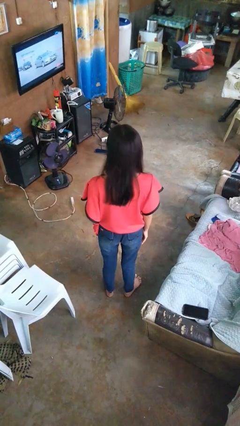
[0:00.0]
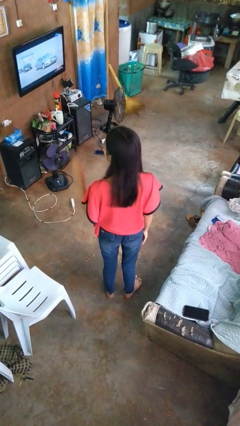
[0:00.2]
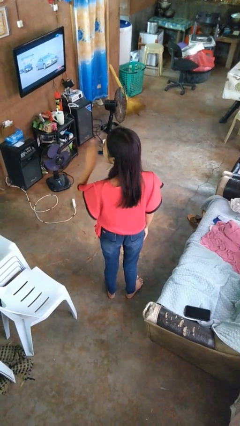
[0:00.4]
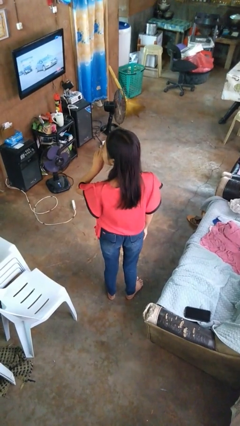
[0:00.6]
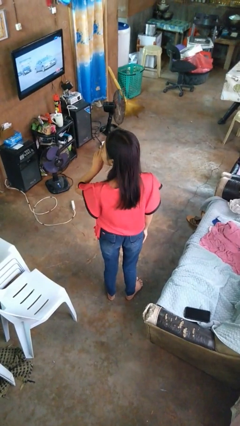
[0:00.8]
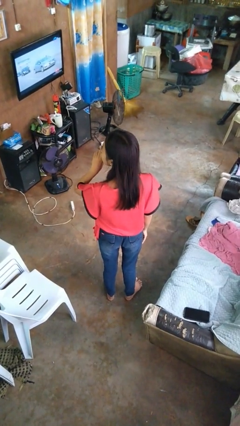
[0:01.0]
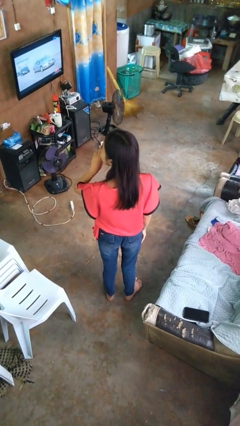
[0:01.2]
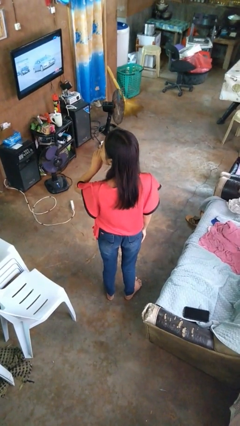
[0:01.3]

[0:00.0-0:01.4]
person gestures be quiet

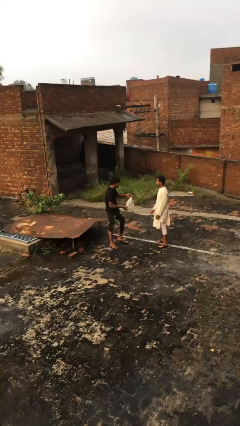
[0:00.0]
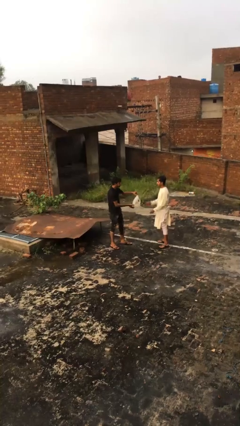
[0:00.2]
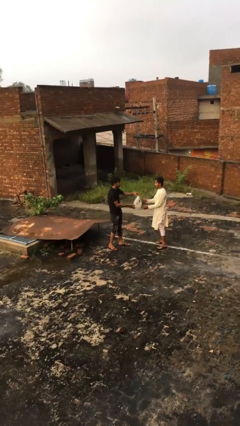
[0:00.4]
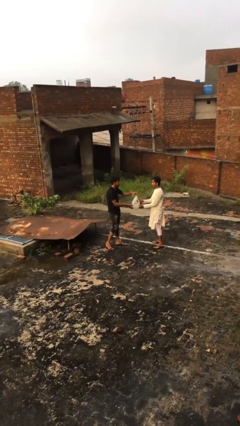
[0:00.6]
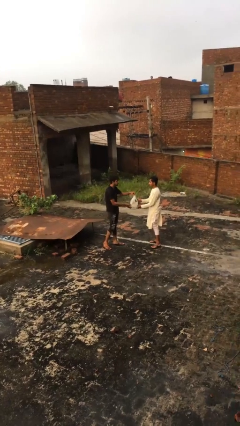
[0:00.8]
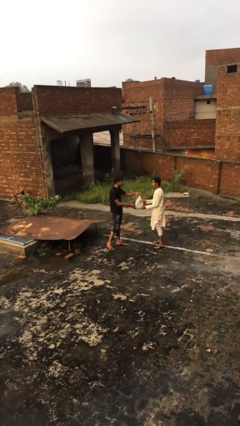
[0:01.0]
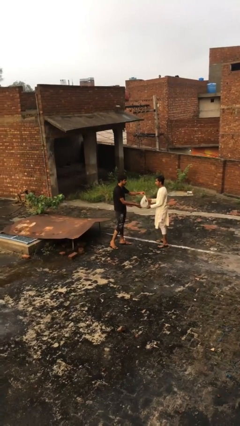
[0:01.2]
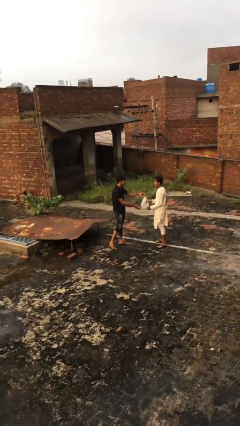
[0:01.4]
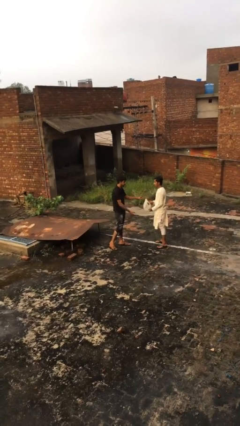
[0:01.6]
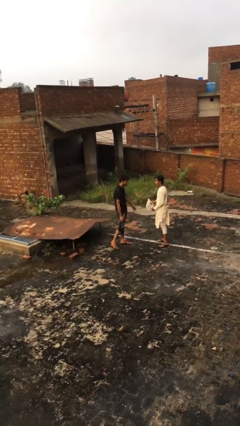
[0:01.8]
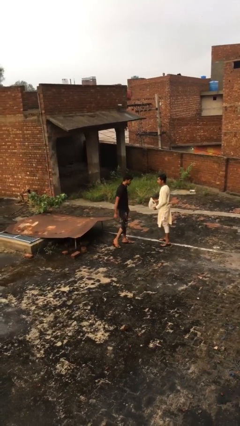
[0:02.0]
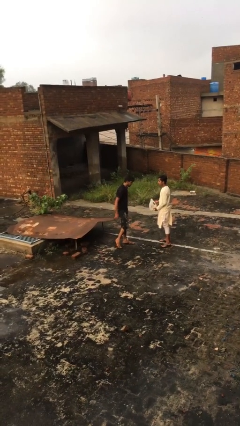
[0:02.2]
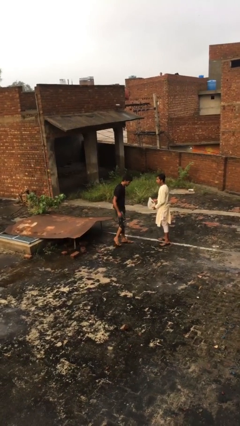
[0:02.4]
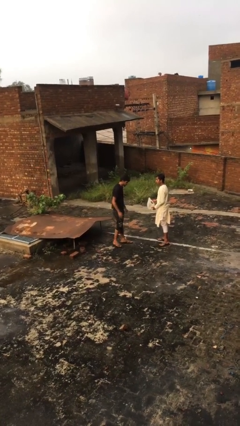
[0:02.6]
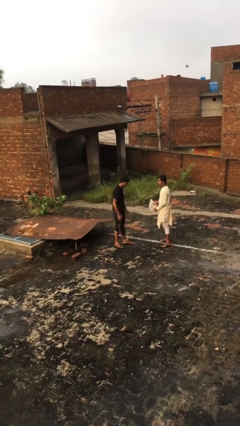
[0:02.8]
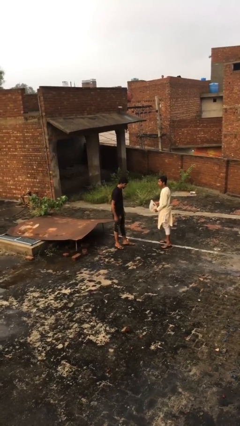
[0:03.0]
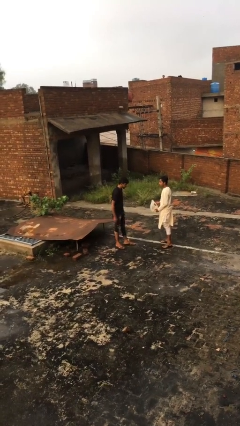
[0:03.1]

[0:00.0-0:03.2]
person transfers object to person

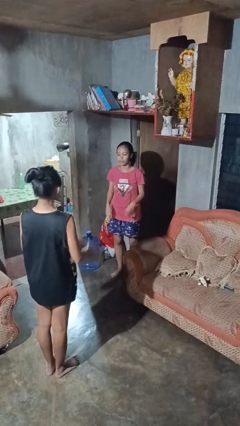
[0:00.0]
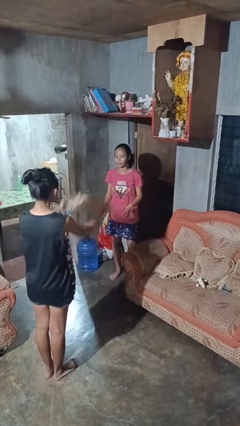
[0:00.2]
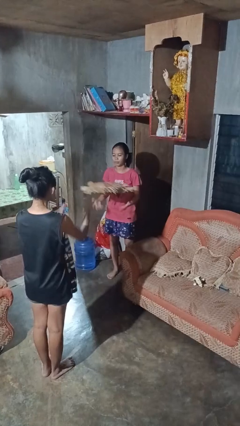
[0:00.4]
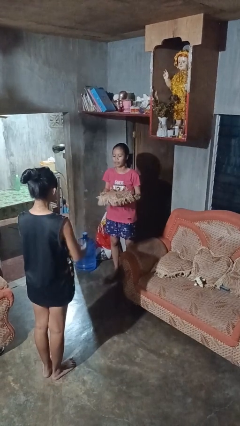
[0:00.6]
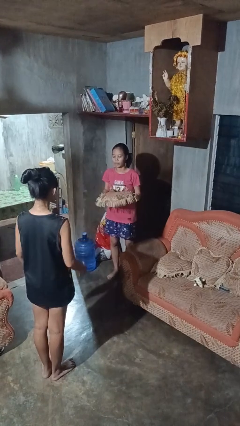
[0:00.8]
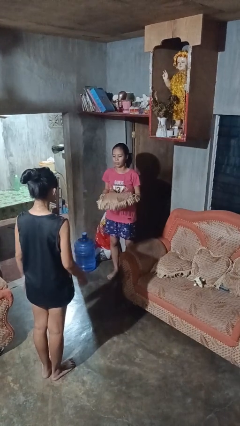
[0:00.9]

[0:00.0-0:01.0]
person catches object from person

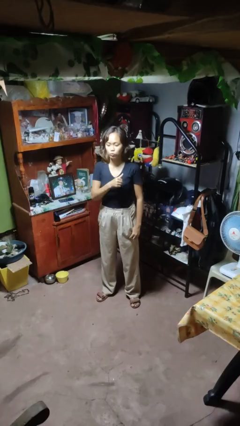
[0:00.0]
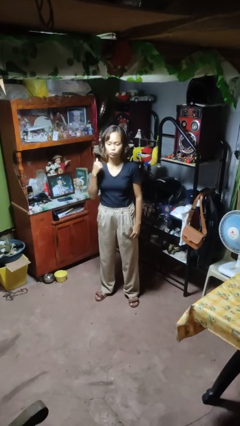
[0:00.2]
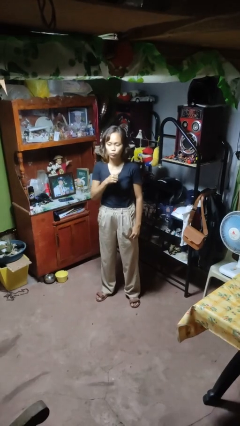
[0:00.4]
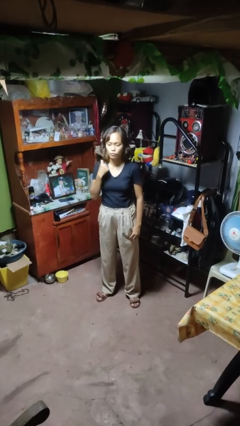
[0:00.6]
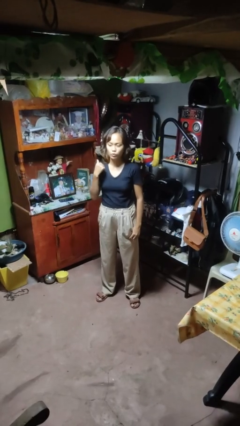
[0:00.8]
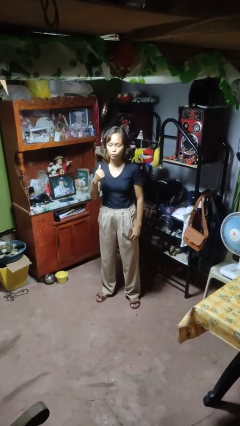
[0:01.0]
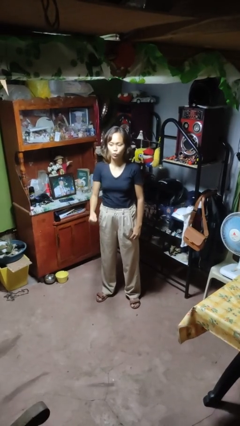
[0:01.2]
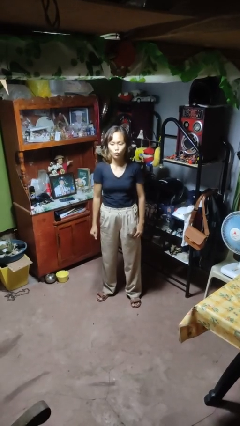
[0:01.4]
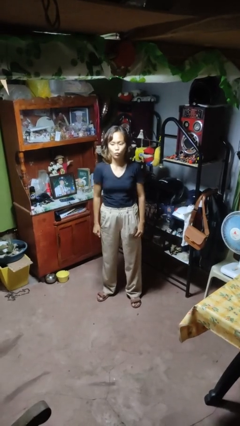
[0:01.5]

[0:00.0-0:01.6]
person gestures cut

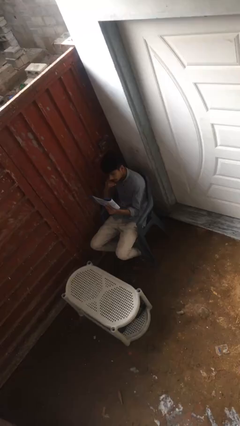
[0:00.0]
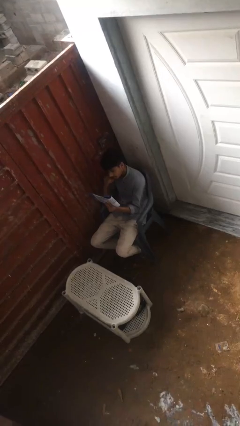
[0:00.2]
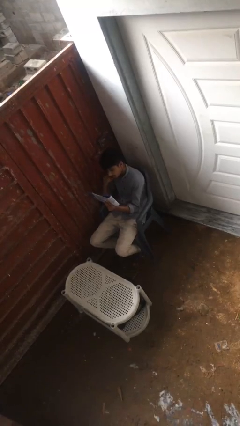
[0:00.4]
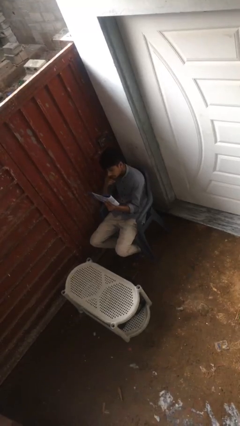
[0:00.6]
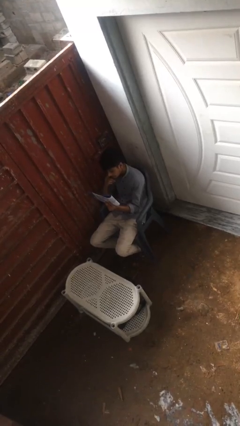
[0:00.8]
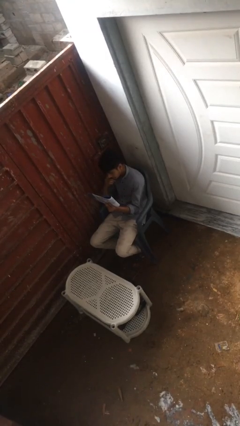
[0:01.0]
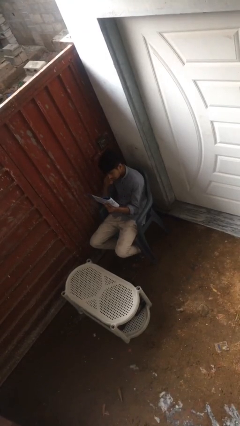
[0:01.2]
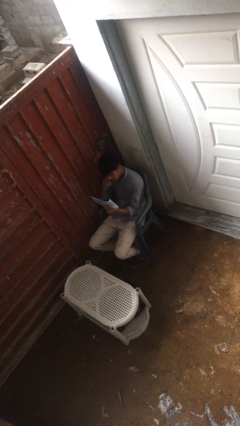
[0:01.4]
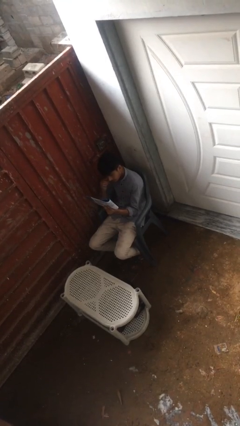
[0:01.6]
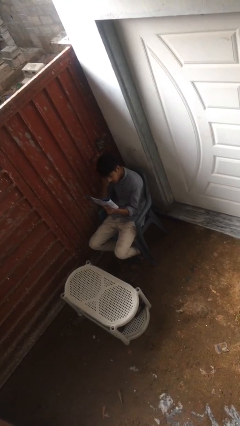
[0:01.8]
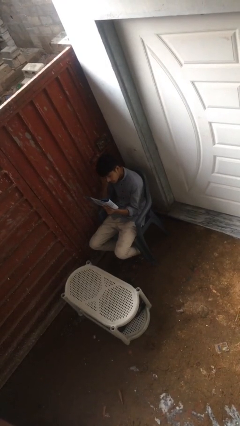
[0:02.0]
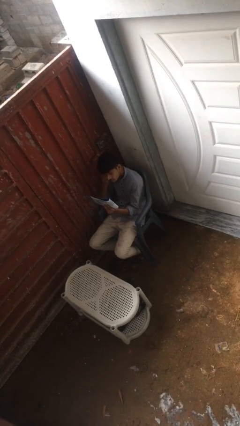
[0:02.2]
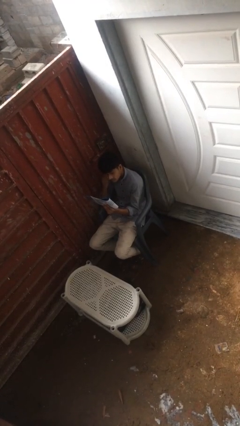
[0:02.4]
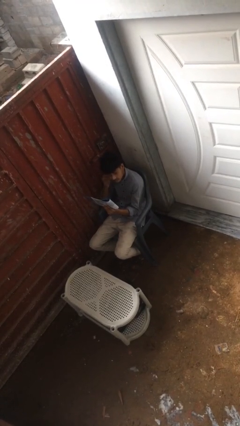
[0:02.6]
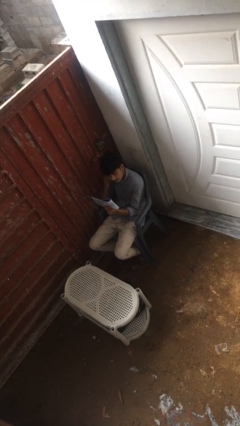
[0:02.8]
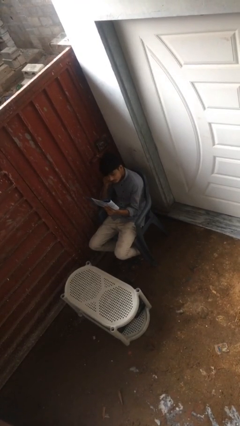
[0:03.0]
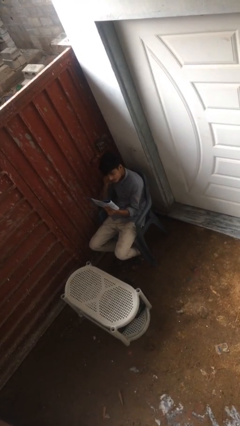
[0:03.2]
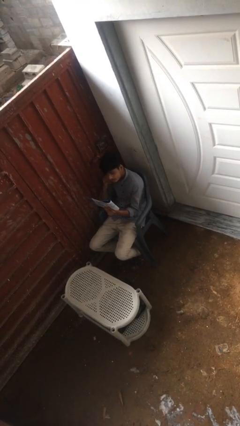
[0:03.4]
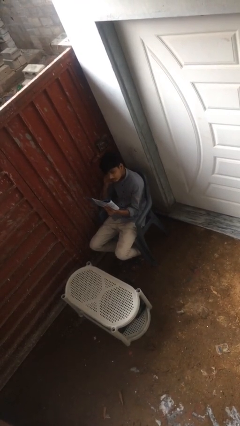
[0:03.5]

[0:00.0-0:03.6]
person reads document

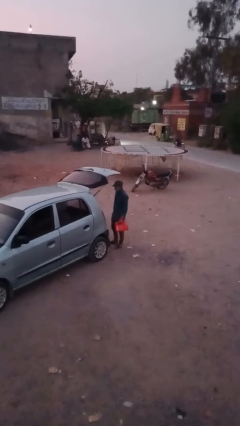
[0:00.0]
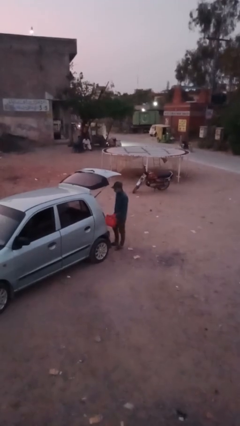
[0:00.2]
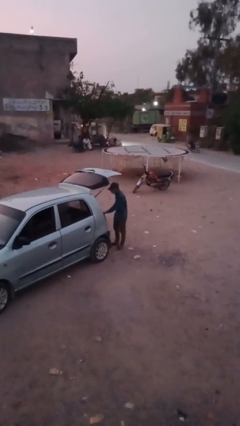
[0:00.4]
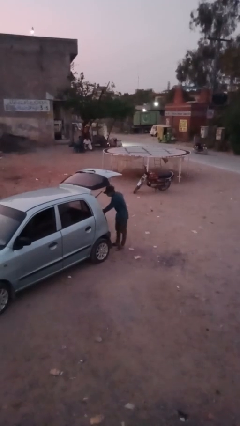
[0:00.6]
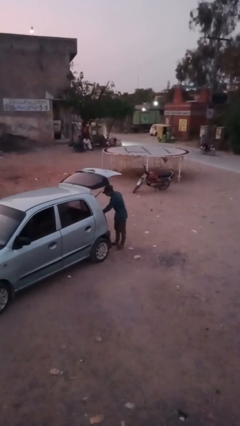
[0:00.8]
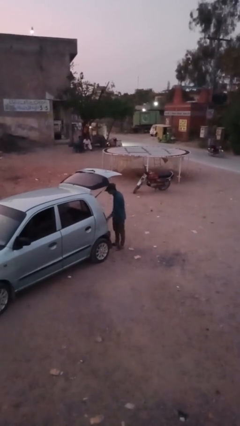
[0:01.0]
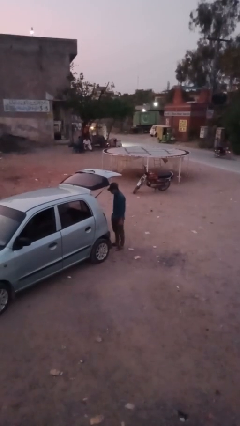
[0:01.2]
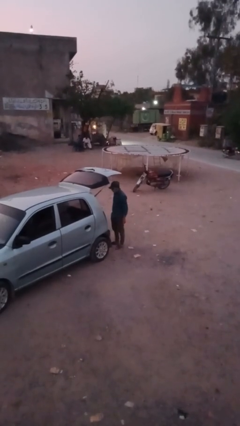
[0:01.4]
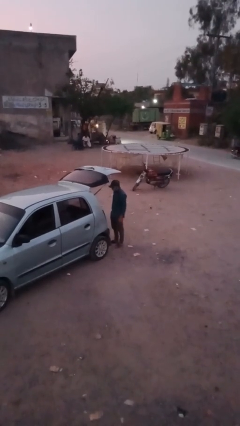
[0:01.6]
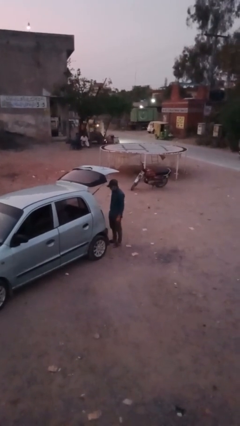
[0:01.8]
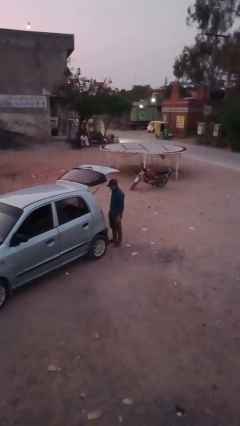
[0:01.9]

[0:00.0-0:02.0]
person loads car

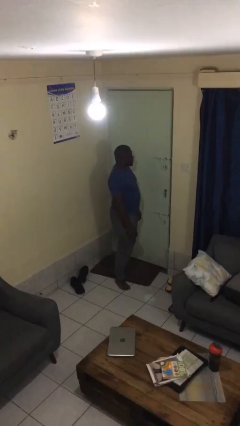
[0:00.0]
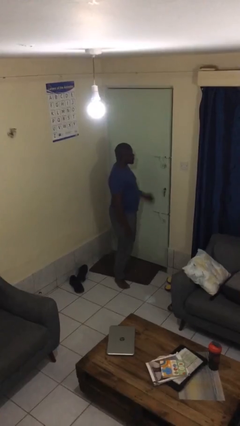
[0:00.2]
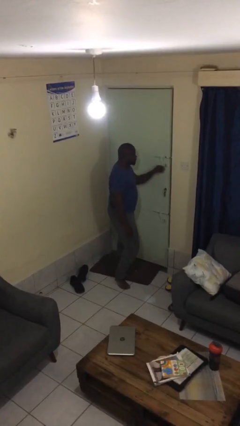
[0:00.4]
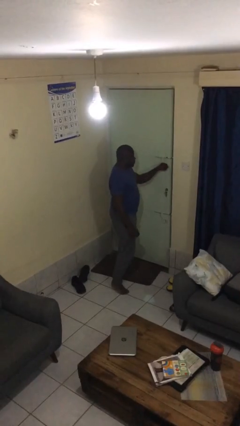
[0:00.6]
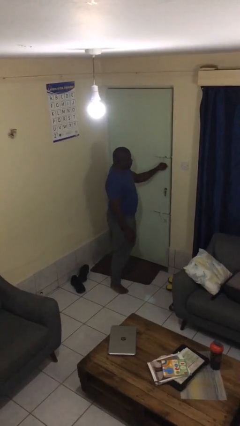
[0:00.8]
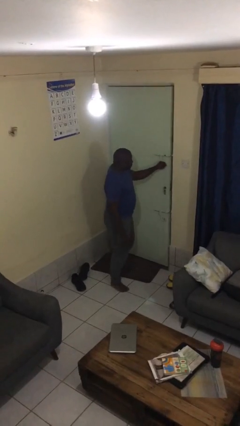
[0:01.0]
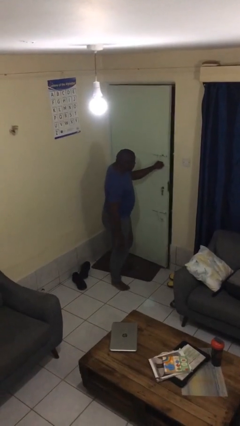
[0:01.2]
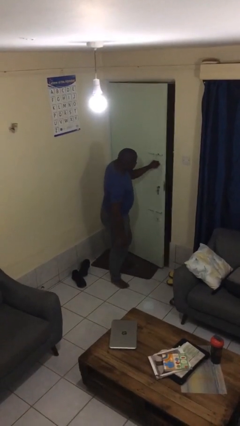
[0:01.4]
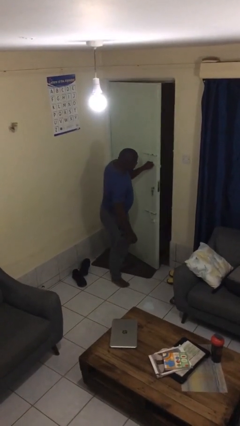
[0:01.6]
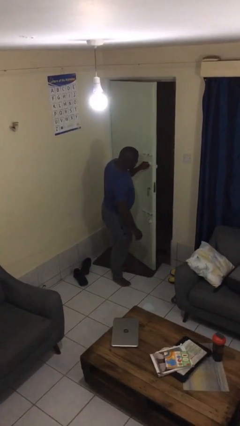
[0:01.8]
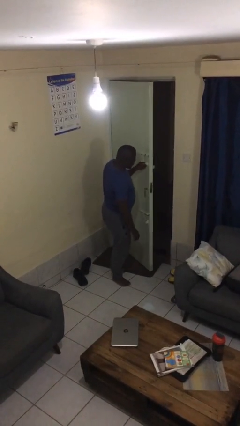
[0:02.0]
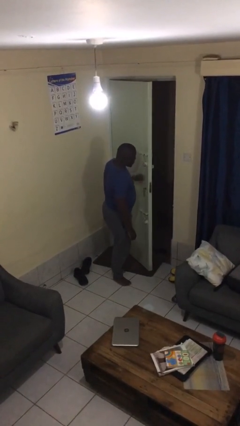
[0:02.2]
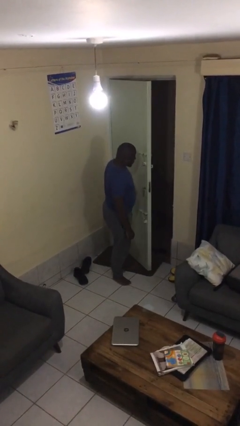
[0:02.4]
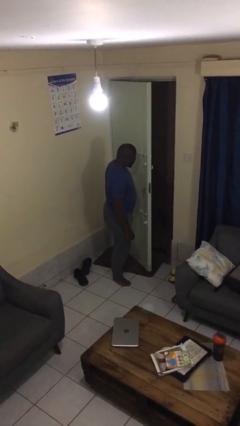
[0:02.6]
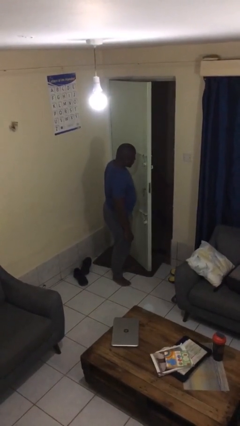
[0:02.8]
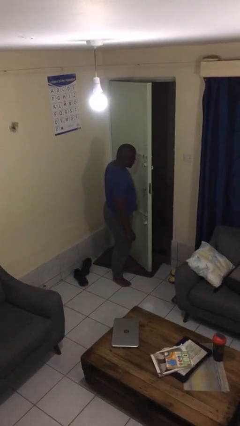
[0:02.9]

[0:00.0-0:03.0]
person opens facility door

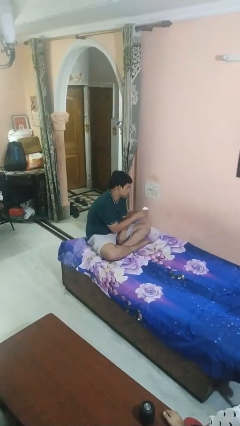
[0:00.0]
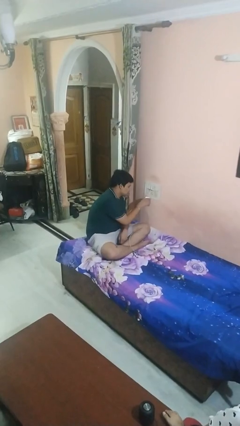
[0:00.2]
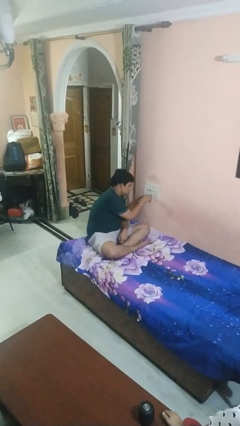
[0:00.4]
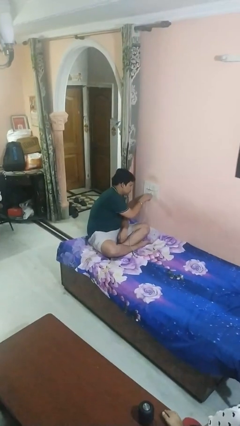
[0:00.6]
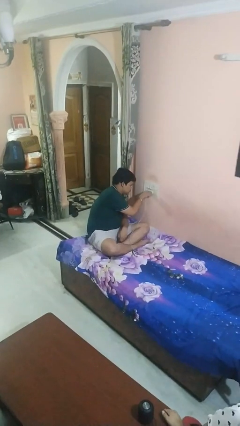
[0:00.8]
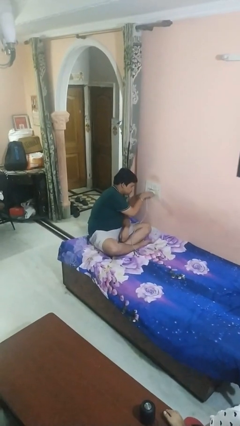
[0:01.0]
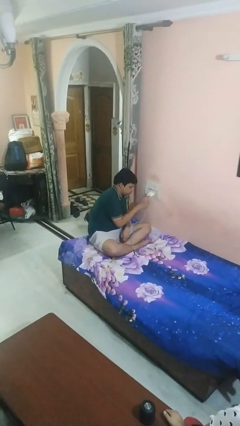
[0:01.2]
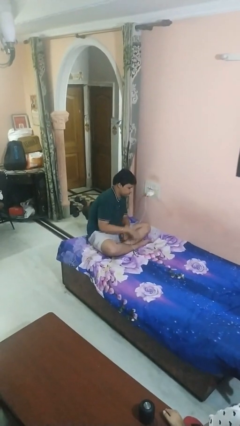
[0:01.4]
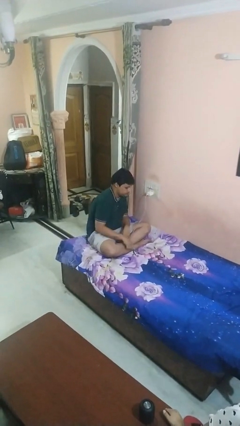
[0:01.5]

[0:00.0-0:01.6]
person plugs into electrical socket
